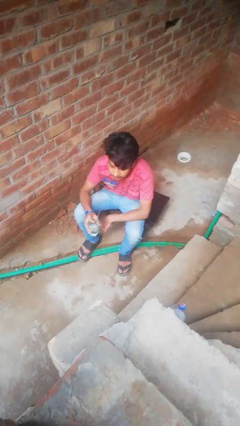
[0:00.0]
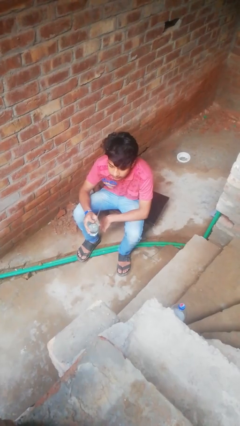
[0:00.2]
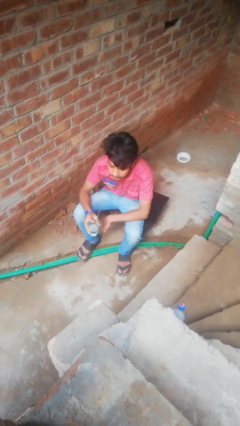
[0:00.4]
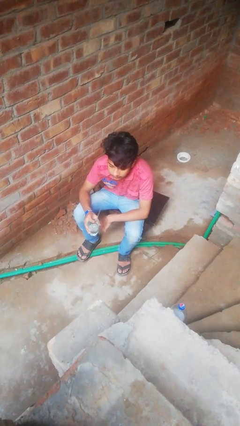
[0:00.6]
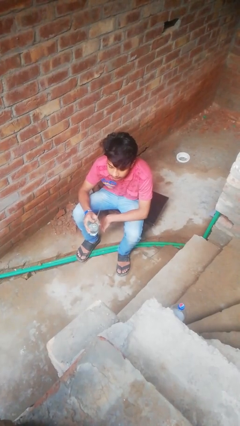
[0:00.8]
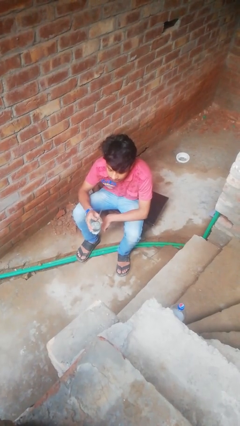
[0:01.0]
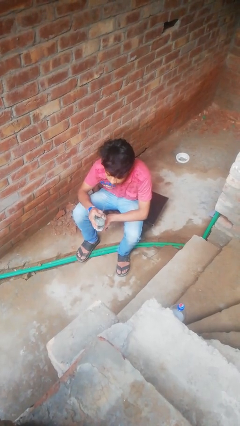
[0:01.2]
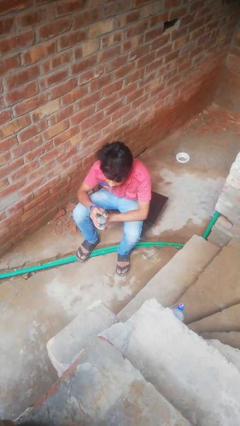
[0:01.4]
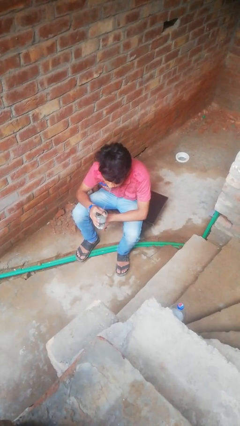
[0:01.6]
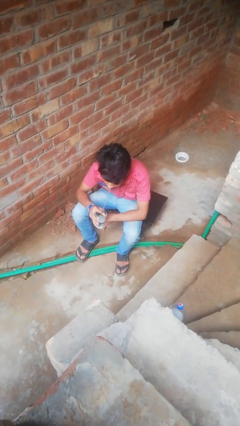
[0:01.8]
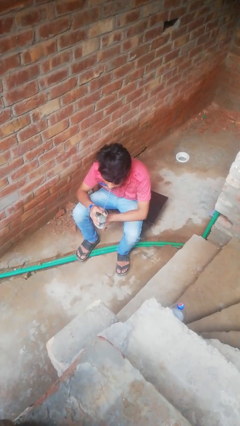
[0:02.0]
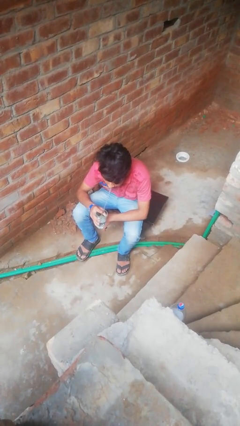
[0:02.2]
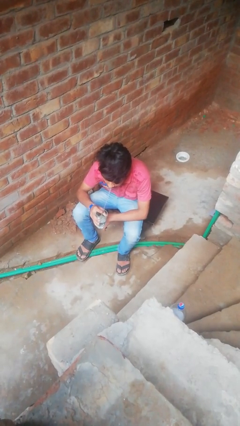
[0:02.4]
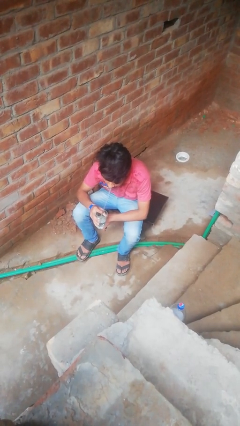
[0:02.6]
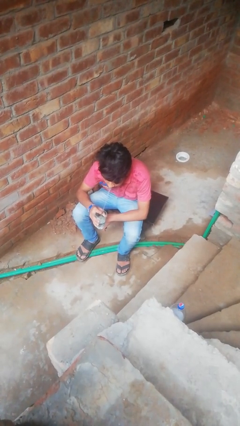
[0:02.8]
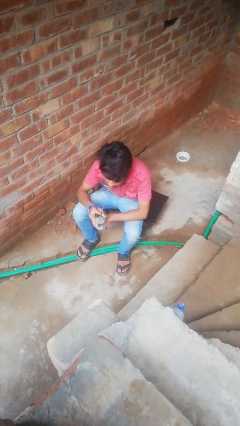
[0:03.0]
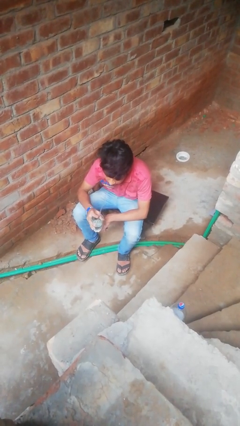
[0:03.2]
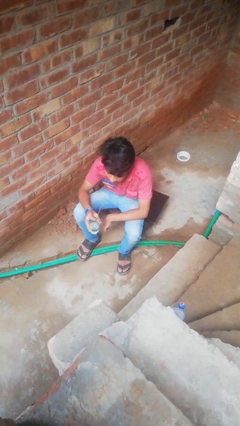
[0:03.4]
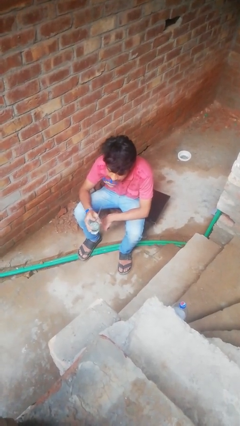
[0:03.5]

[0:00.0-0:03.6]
person drinks from straw

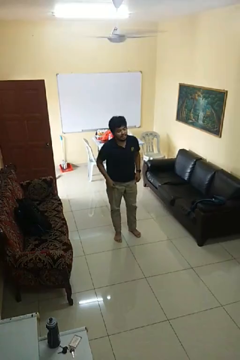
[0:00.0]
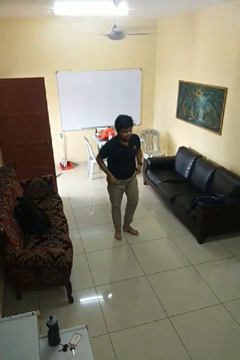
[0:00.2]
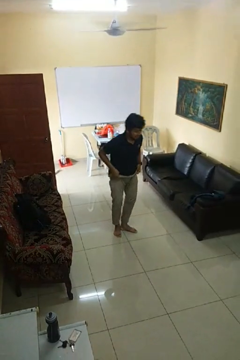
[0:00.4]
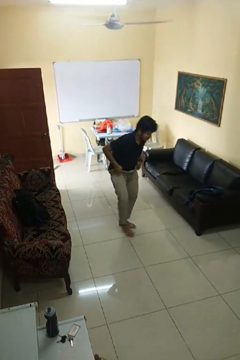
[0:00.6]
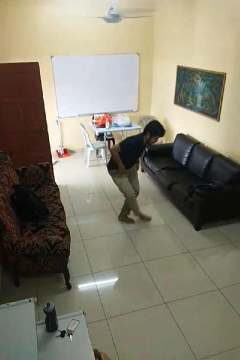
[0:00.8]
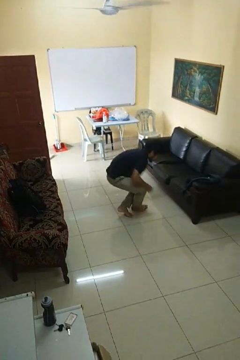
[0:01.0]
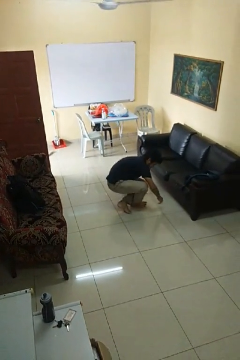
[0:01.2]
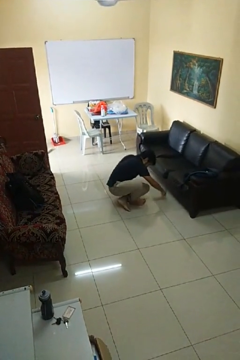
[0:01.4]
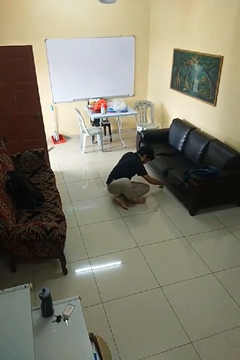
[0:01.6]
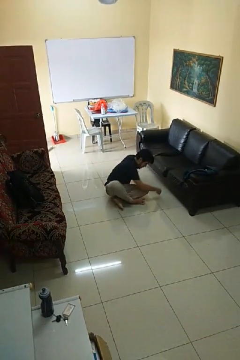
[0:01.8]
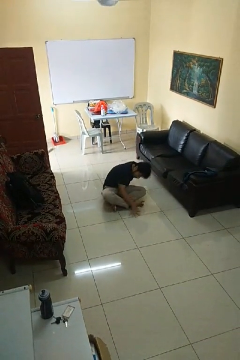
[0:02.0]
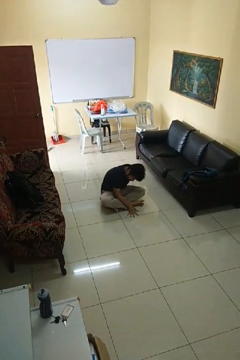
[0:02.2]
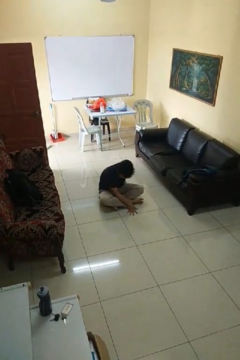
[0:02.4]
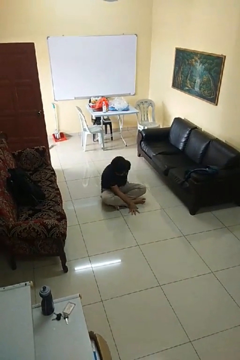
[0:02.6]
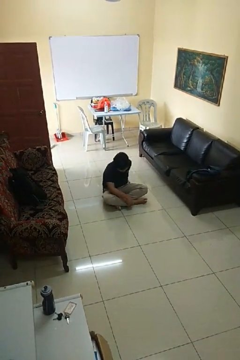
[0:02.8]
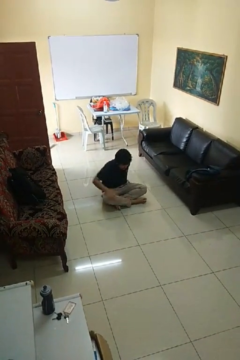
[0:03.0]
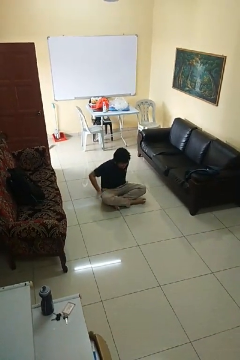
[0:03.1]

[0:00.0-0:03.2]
person sits crisscross

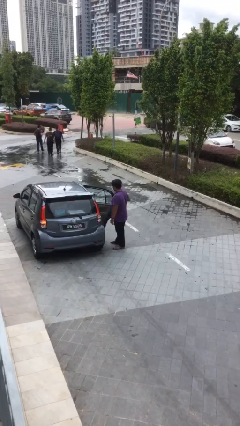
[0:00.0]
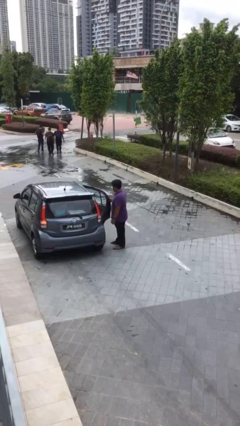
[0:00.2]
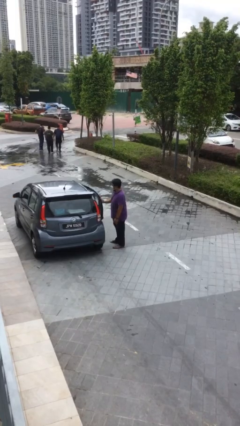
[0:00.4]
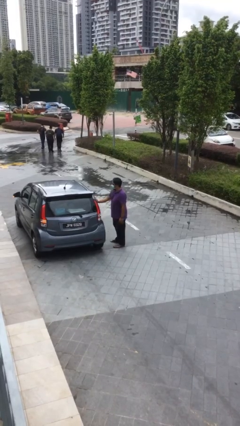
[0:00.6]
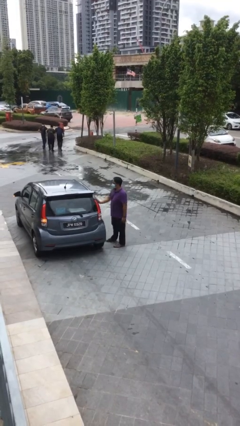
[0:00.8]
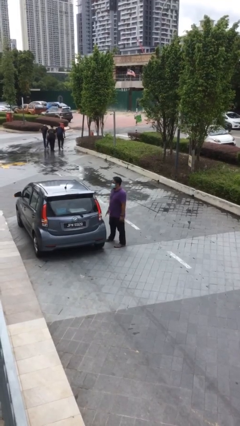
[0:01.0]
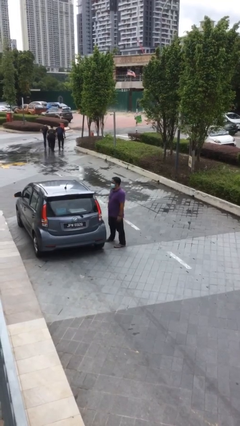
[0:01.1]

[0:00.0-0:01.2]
person closes car door

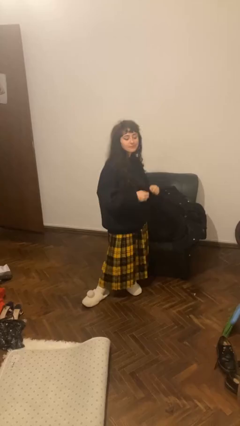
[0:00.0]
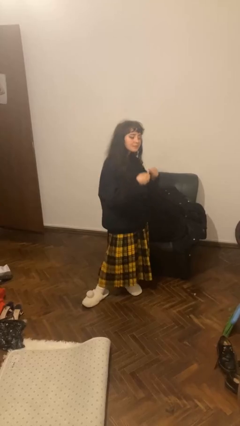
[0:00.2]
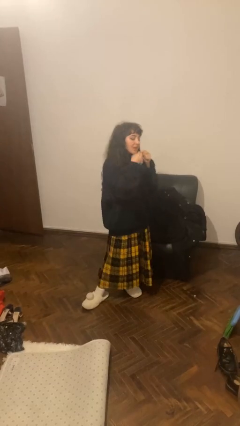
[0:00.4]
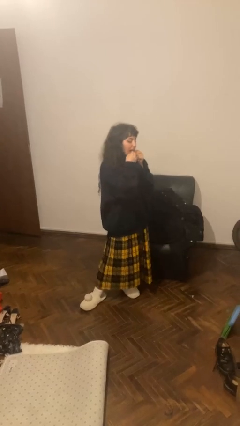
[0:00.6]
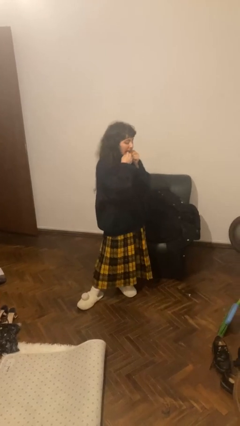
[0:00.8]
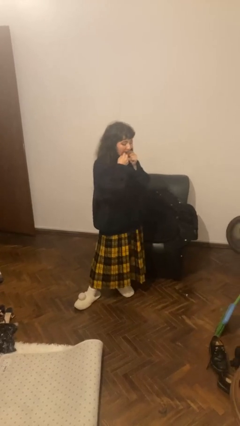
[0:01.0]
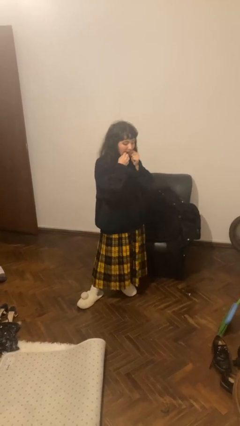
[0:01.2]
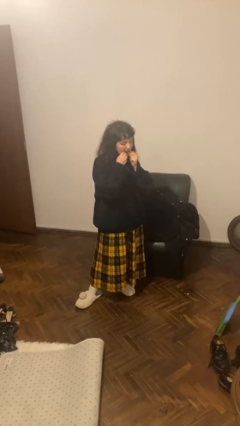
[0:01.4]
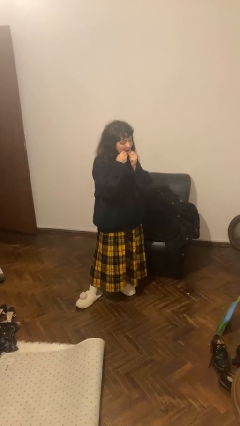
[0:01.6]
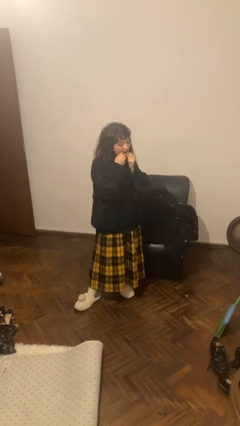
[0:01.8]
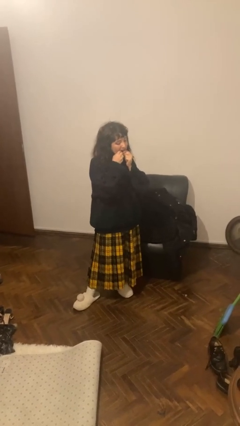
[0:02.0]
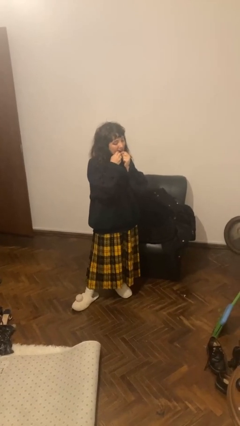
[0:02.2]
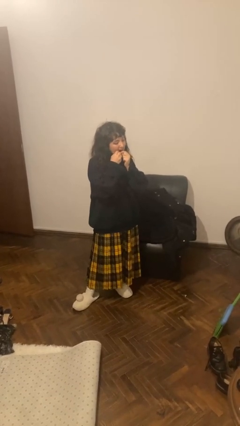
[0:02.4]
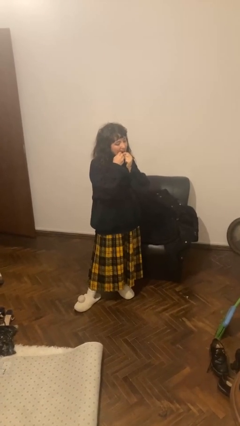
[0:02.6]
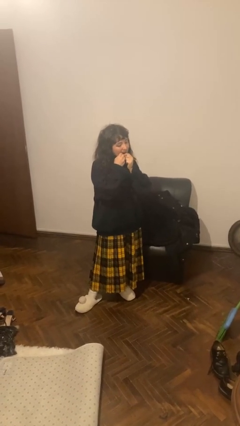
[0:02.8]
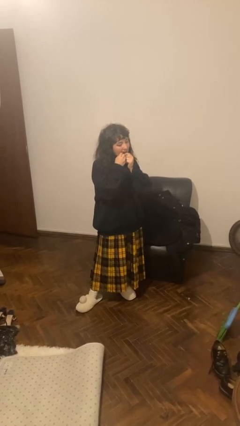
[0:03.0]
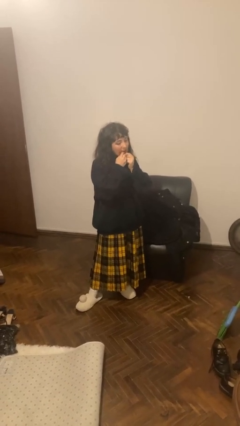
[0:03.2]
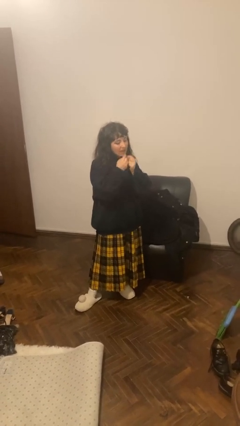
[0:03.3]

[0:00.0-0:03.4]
person flosses

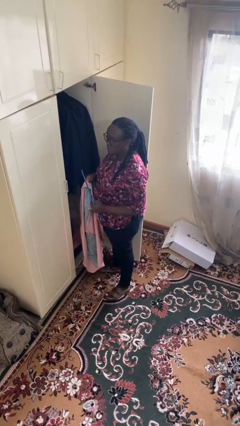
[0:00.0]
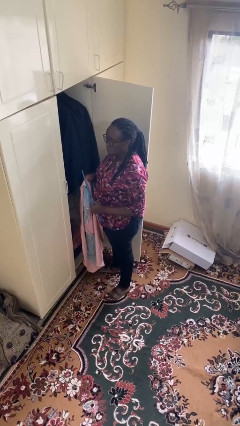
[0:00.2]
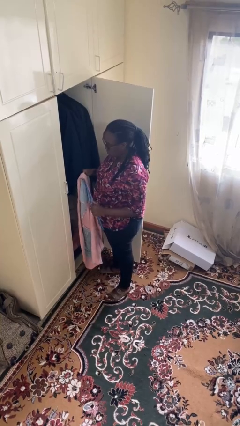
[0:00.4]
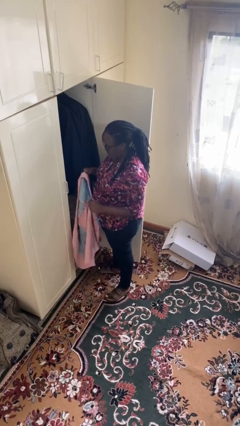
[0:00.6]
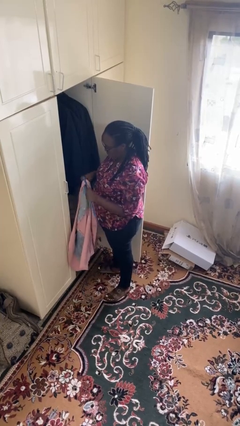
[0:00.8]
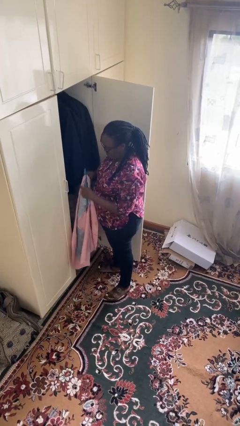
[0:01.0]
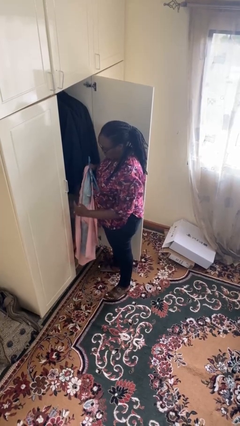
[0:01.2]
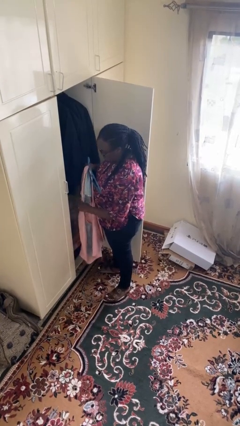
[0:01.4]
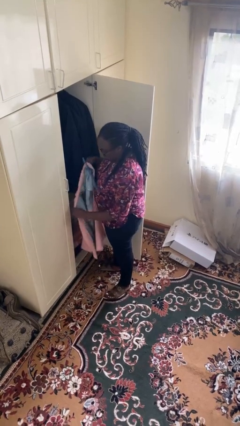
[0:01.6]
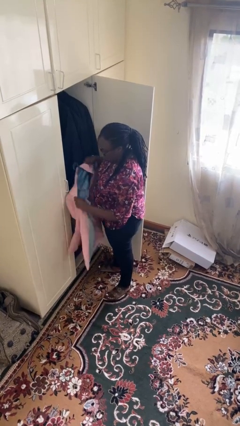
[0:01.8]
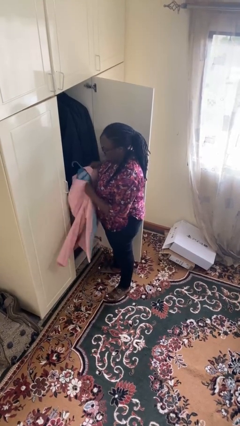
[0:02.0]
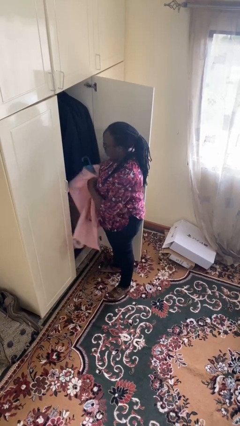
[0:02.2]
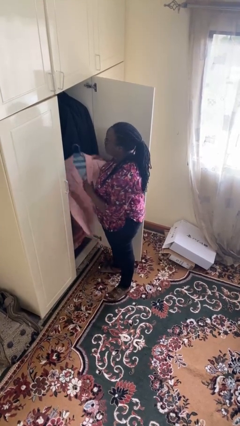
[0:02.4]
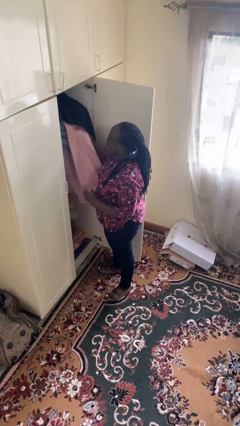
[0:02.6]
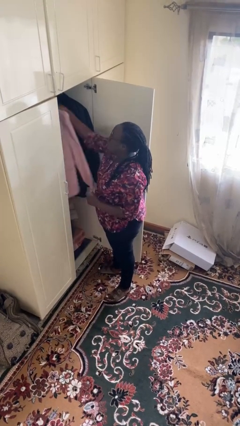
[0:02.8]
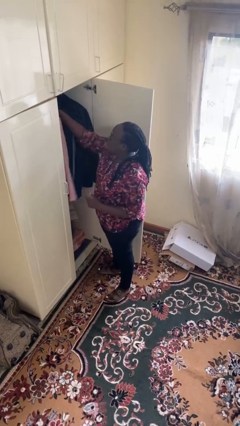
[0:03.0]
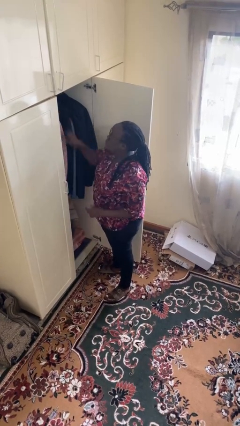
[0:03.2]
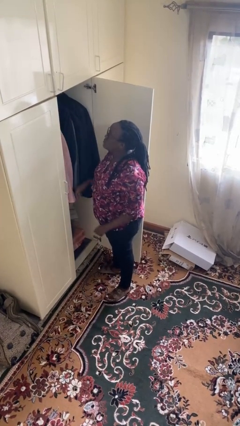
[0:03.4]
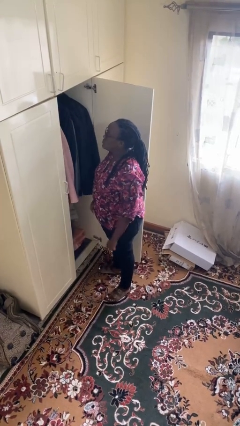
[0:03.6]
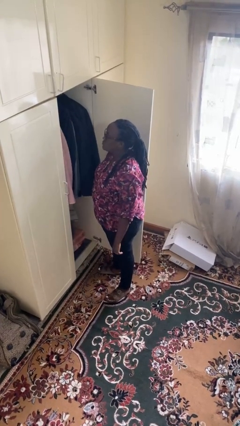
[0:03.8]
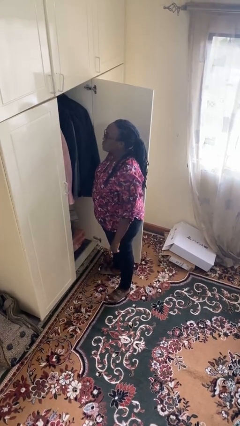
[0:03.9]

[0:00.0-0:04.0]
person puts clothes into closet

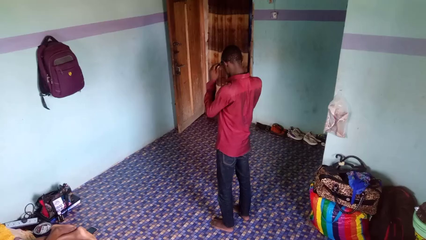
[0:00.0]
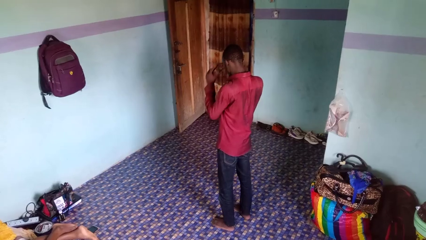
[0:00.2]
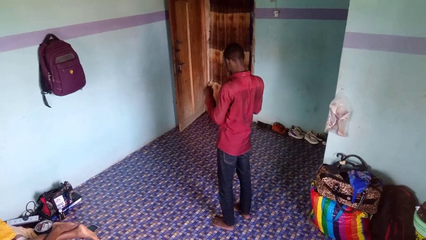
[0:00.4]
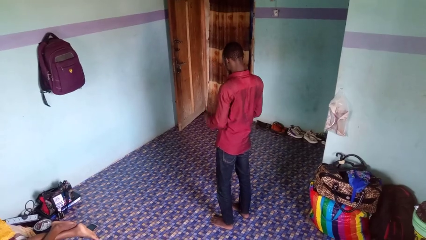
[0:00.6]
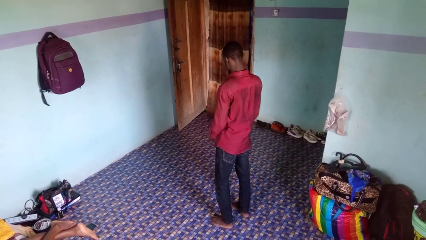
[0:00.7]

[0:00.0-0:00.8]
person takes off glasses

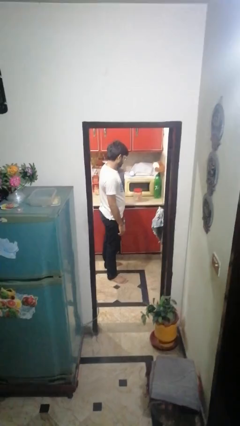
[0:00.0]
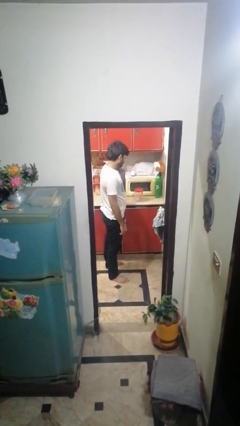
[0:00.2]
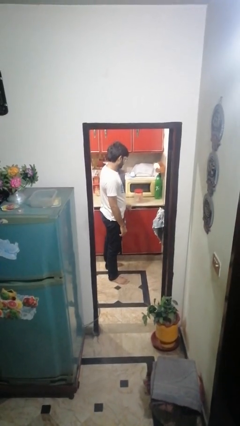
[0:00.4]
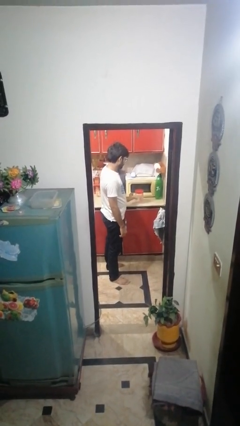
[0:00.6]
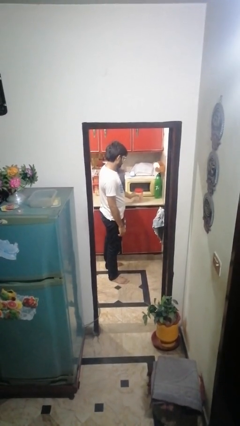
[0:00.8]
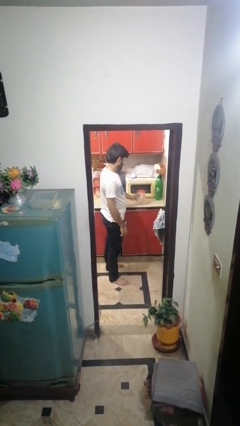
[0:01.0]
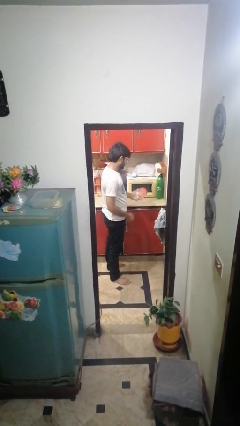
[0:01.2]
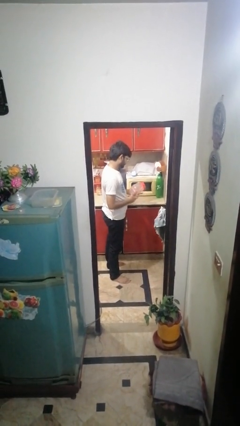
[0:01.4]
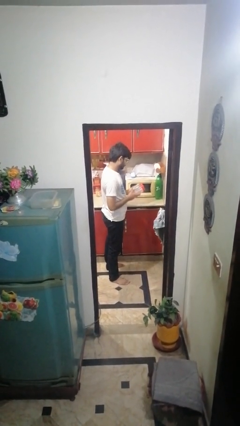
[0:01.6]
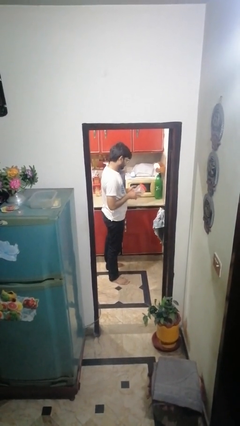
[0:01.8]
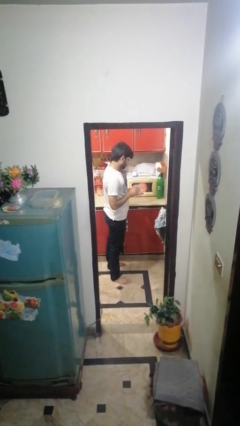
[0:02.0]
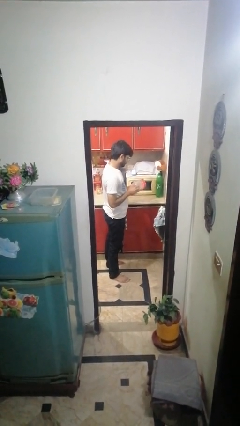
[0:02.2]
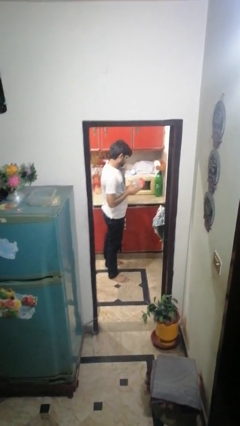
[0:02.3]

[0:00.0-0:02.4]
person picks up object from countertop
